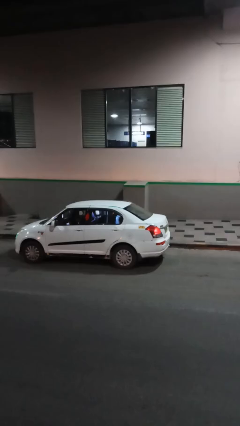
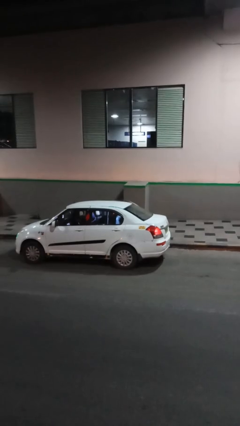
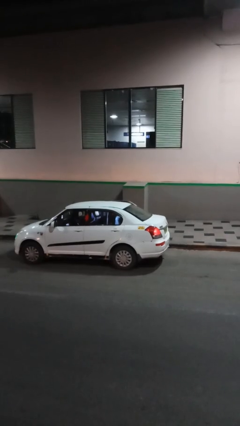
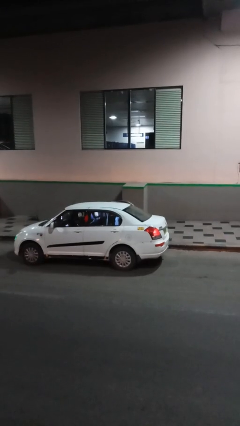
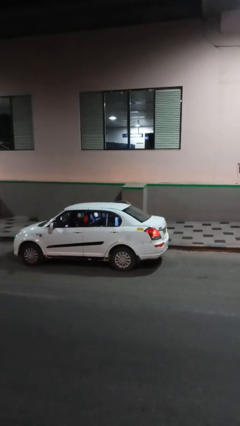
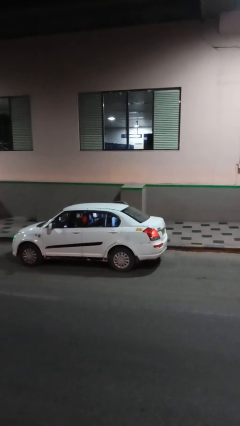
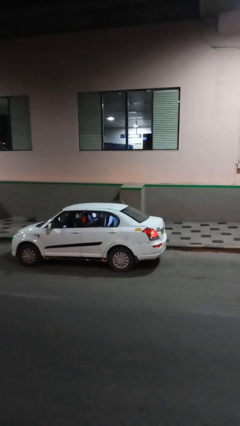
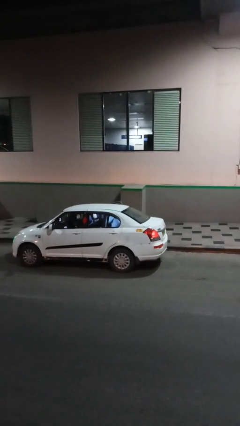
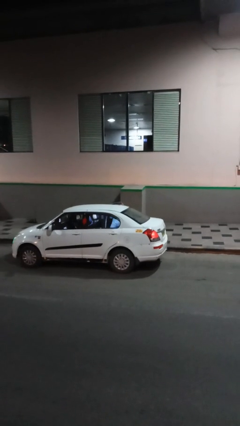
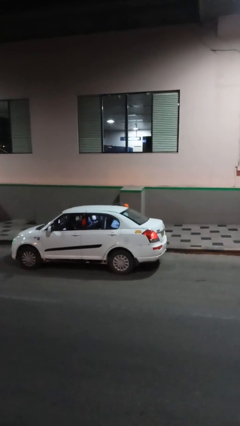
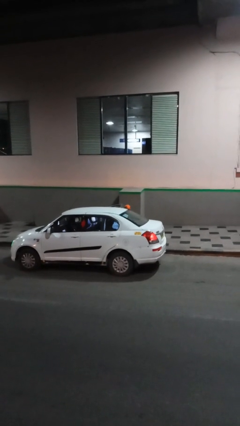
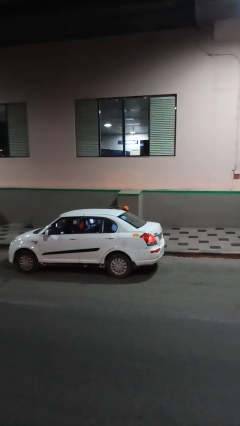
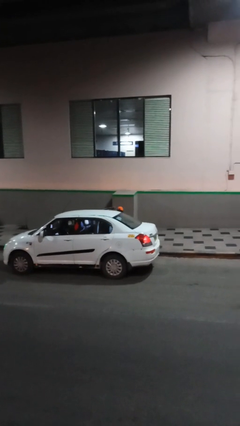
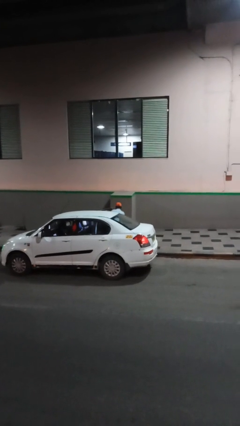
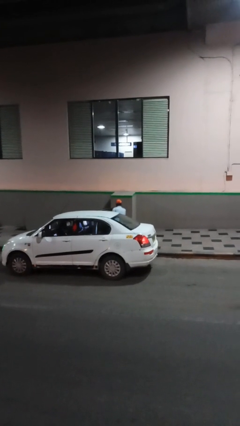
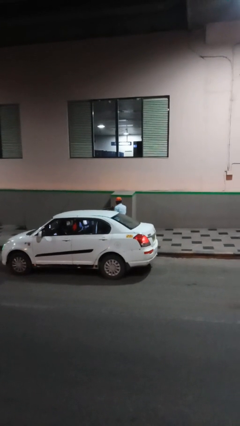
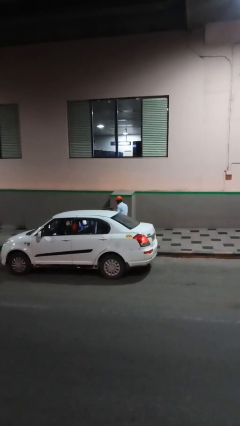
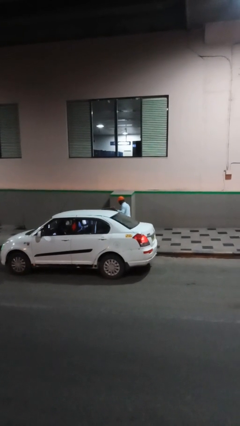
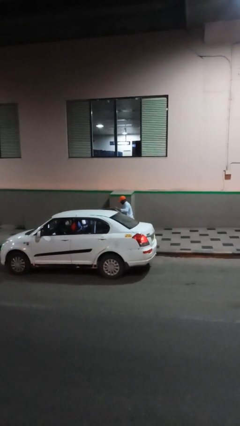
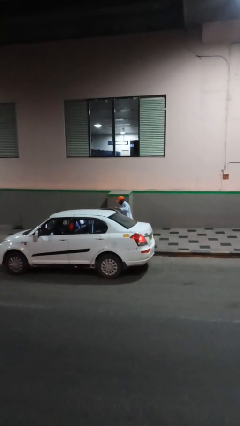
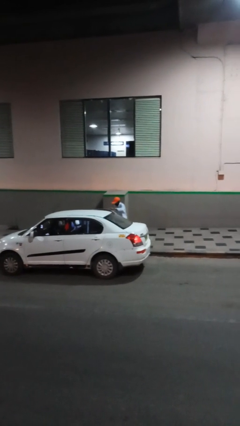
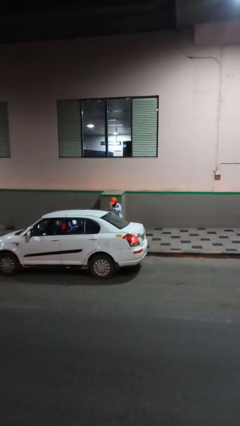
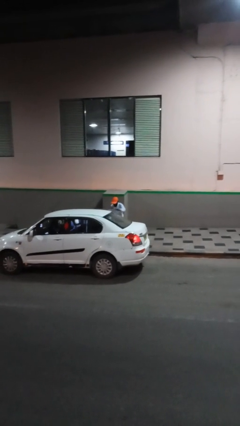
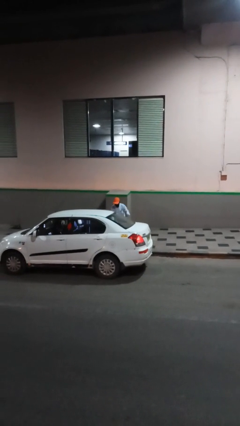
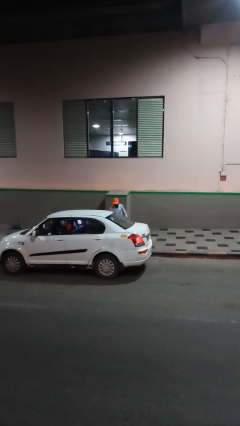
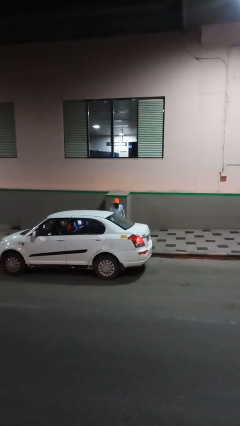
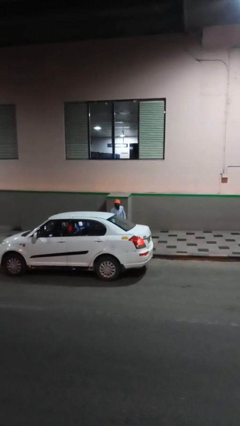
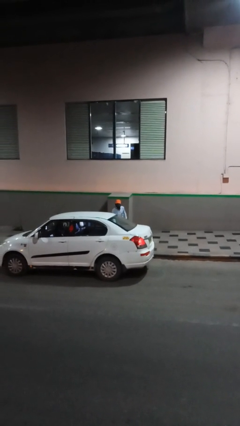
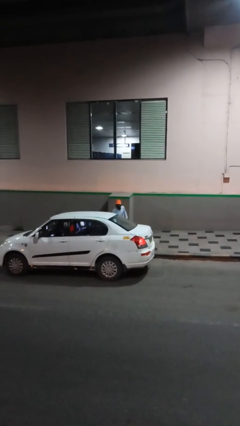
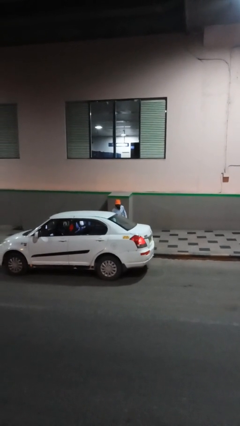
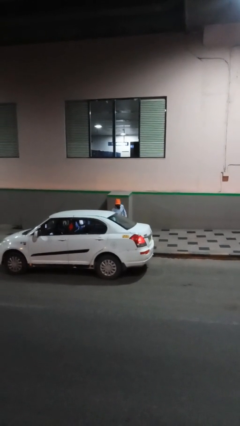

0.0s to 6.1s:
person exits car

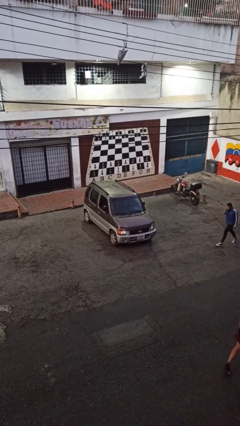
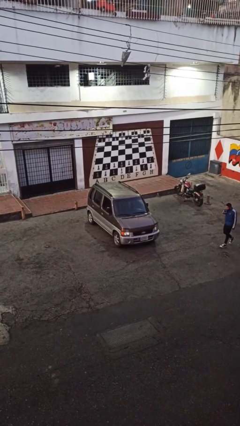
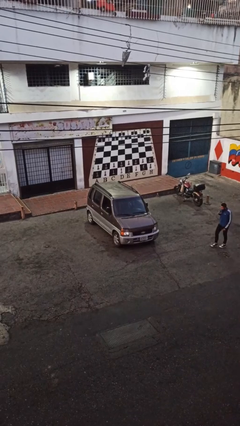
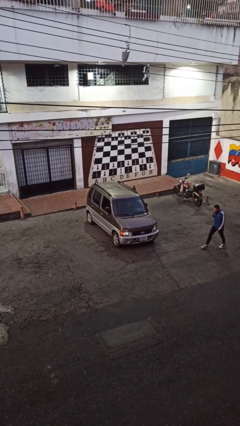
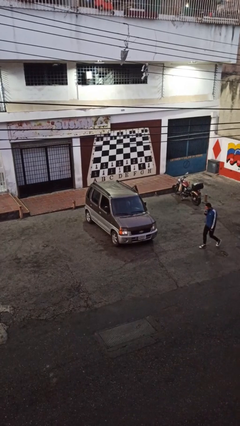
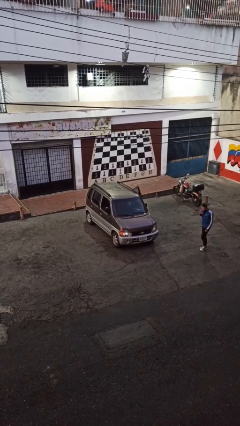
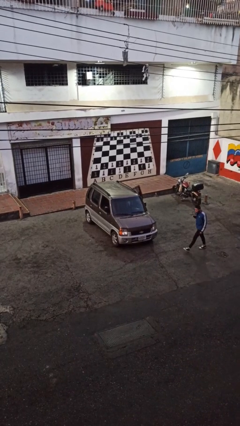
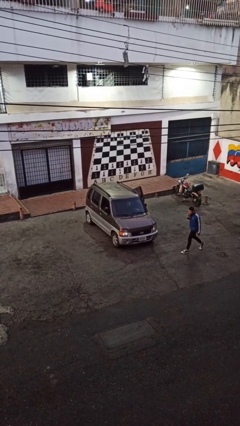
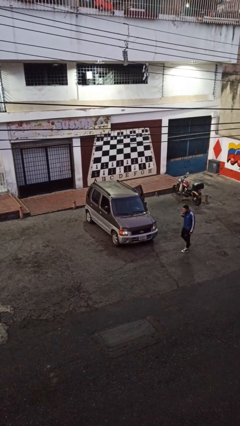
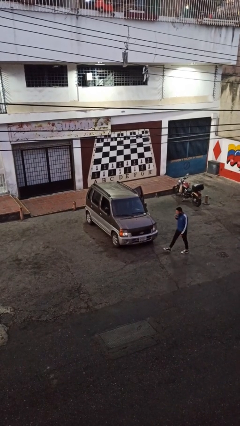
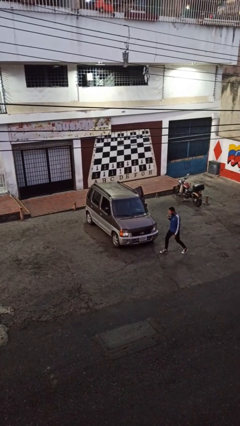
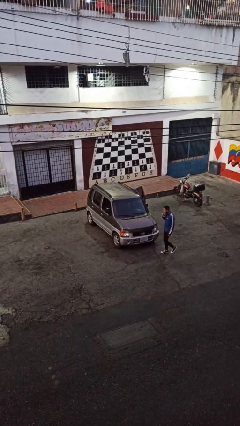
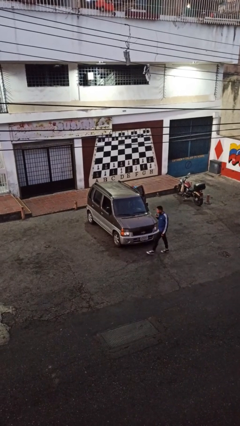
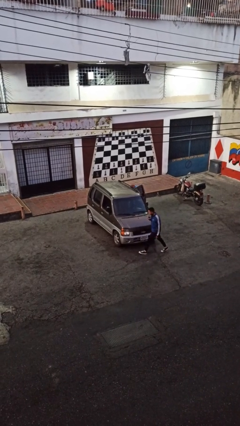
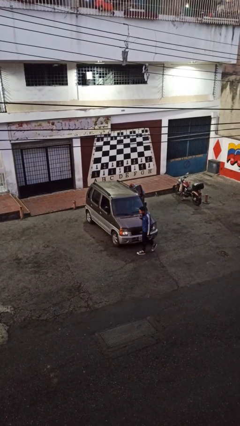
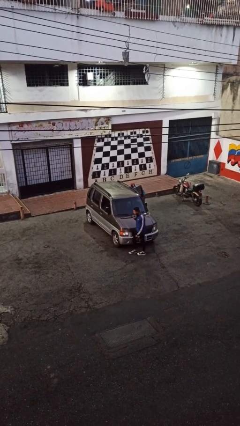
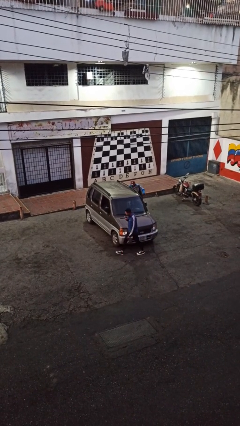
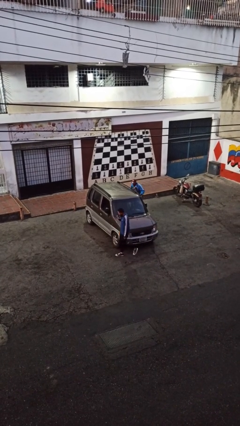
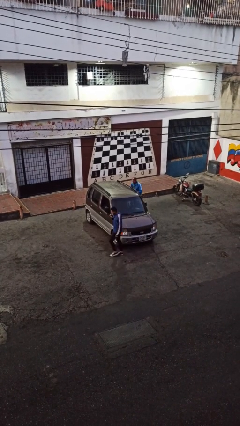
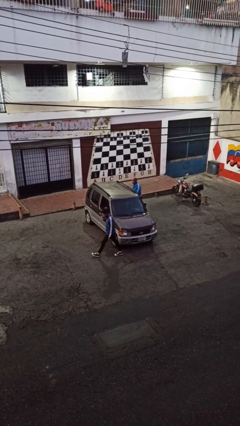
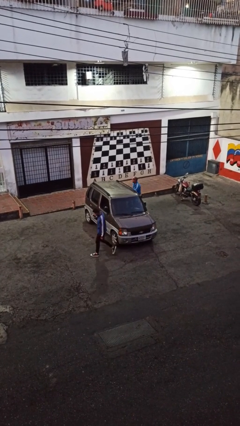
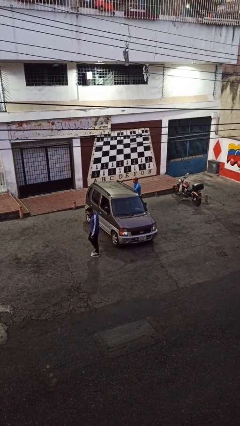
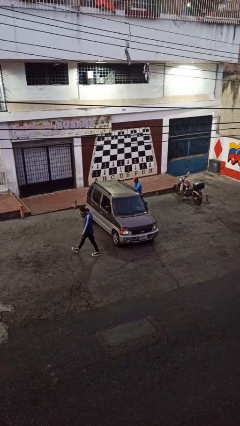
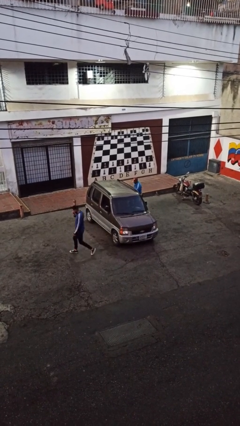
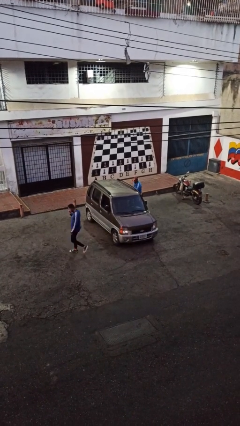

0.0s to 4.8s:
car drops off person

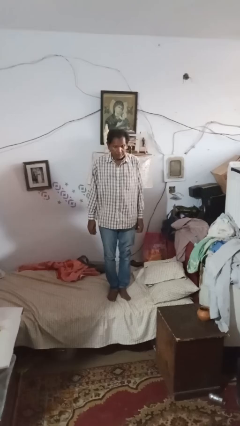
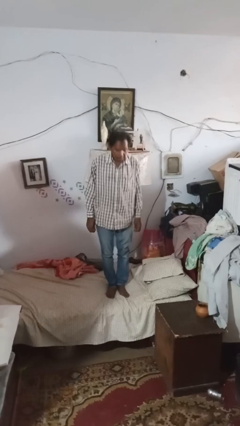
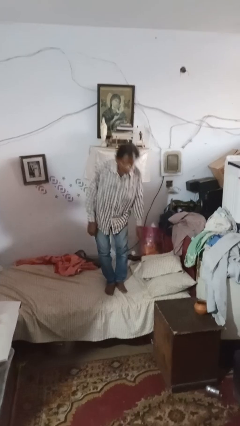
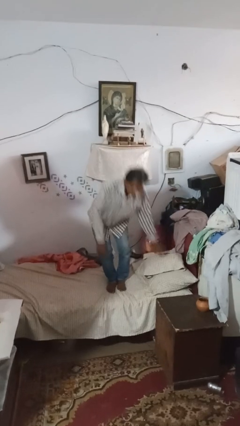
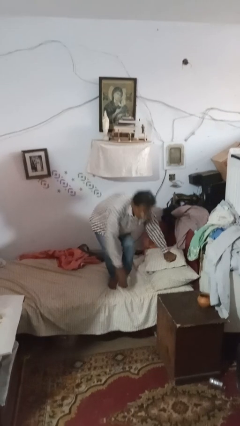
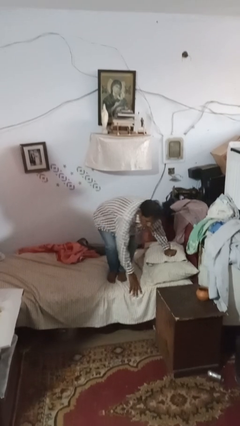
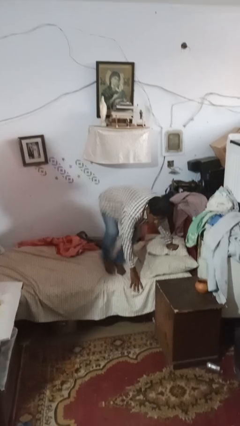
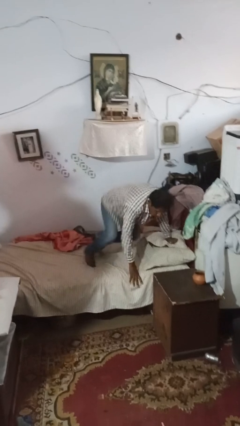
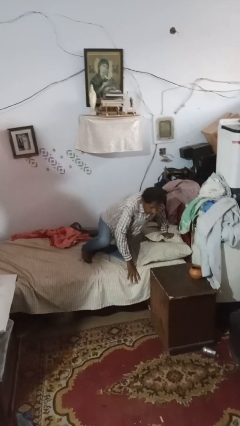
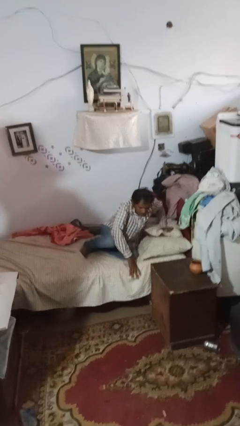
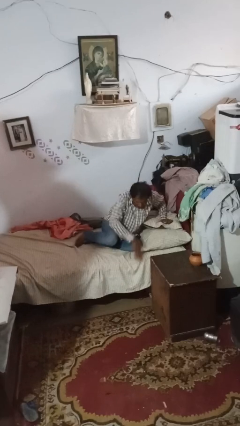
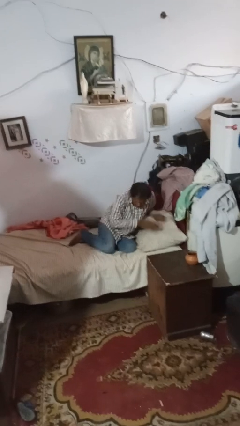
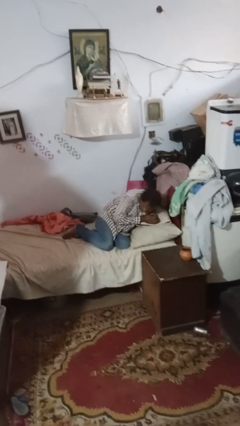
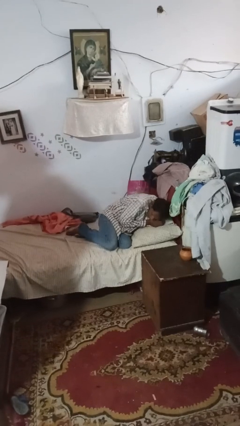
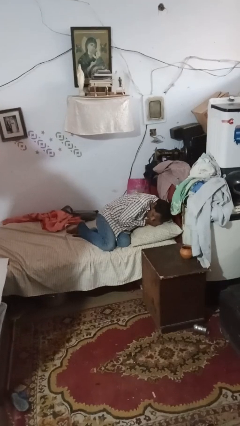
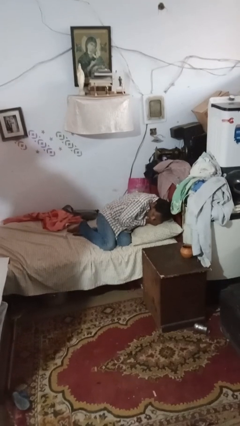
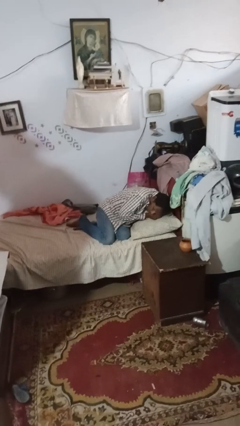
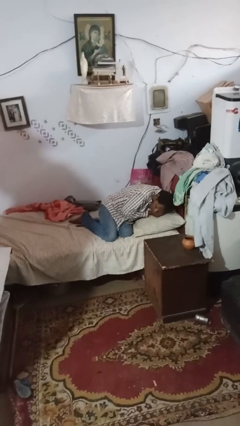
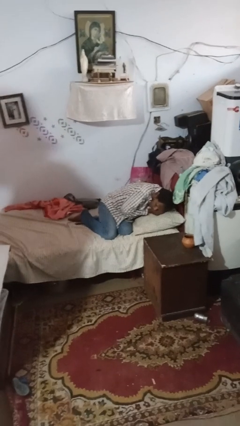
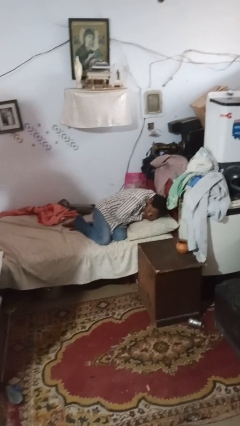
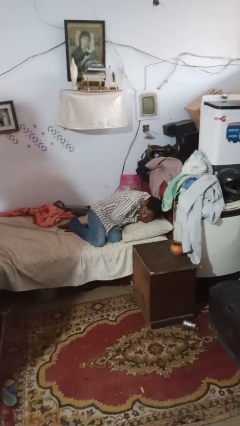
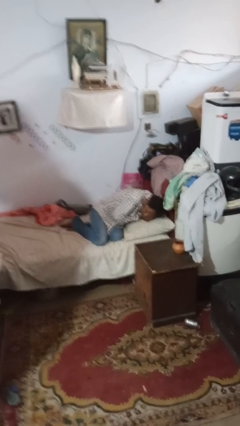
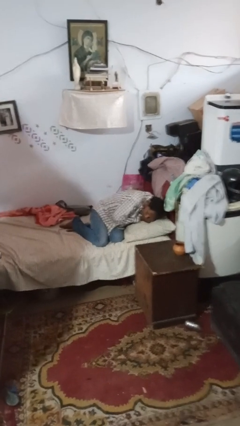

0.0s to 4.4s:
person lies down on bed

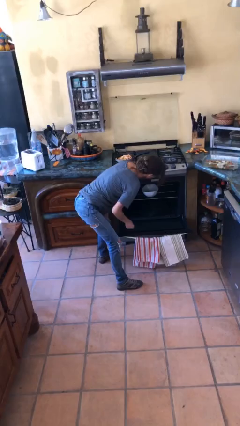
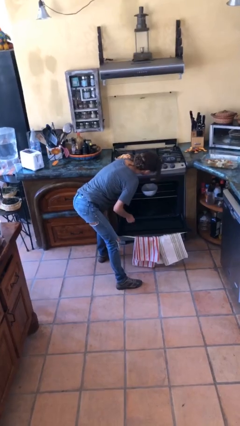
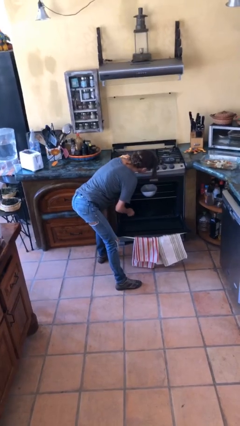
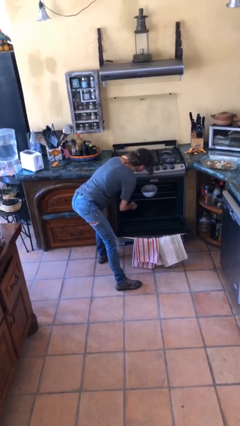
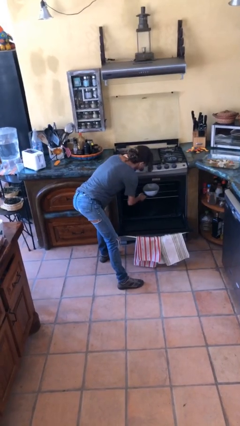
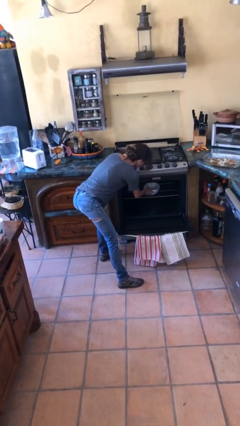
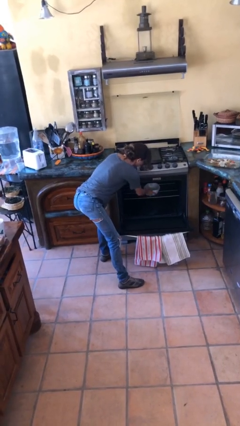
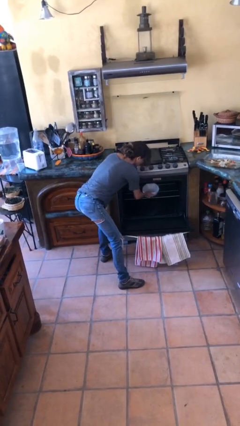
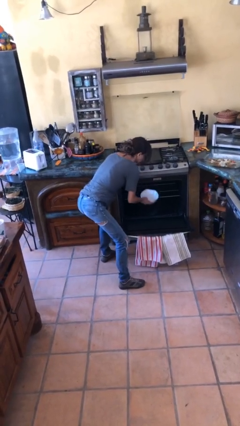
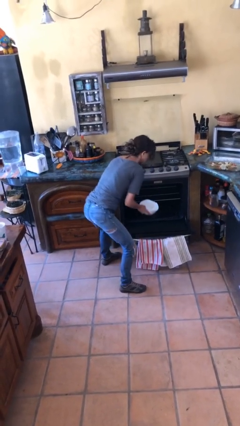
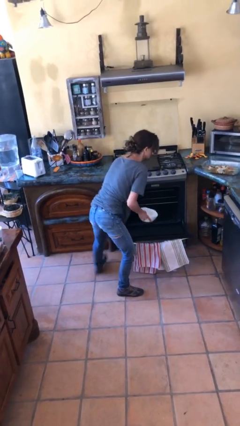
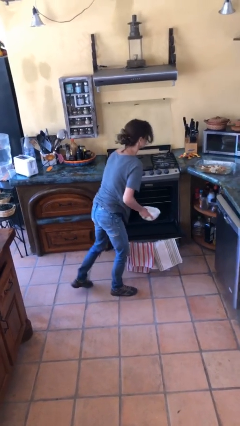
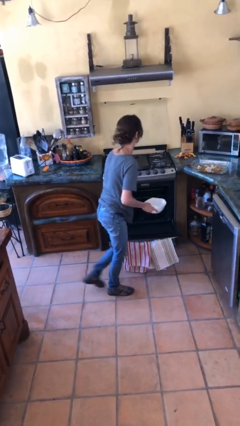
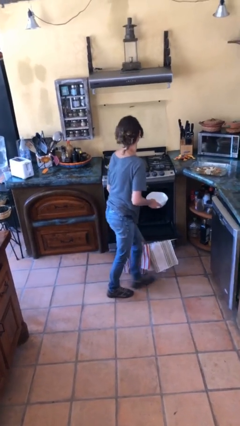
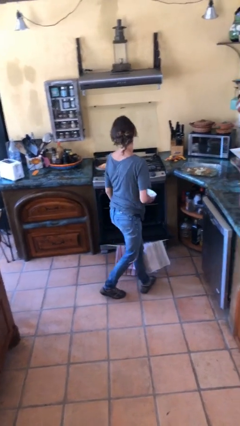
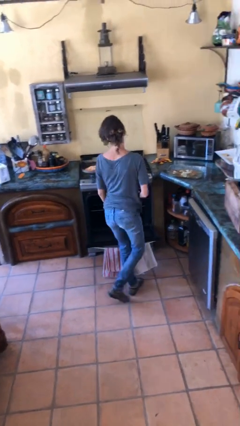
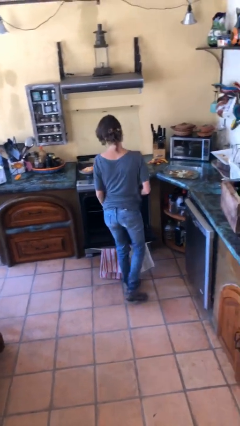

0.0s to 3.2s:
person takes object from oven
